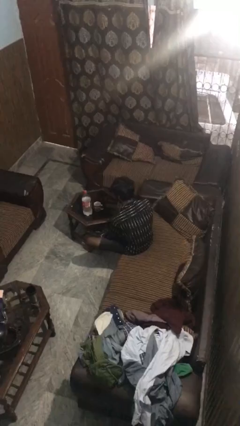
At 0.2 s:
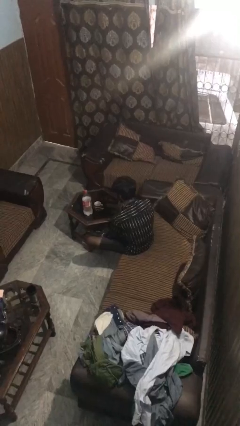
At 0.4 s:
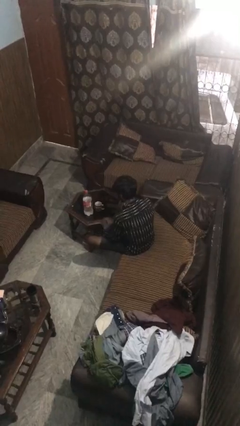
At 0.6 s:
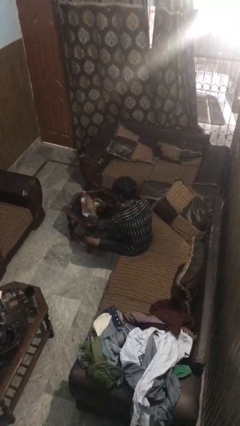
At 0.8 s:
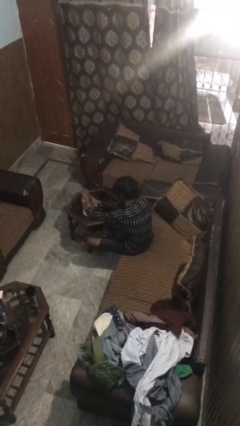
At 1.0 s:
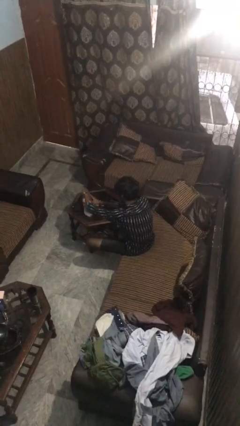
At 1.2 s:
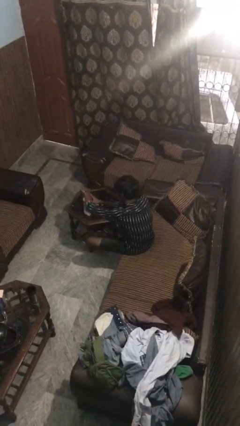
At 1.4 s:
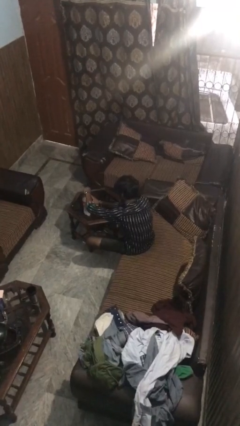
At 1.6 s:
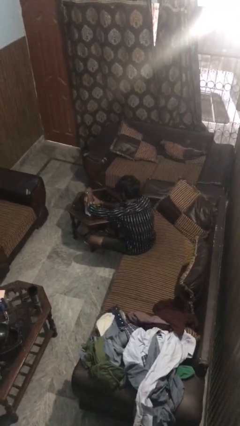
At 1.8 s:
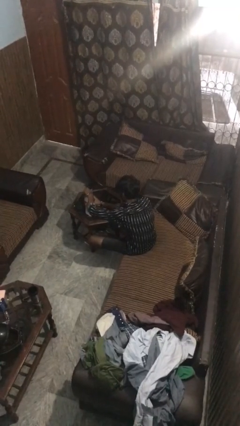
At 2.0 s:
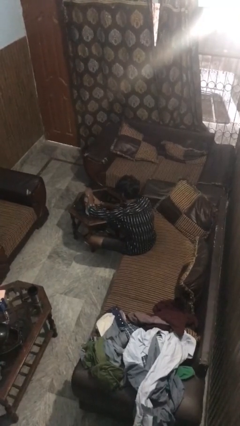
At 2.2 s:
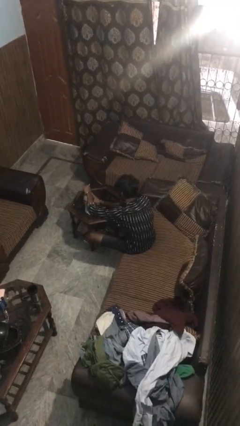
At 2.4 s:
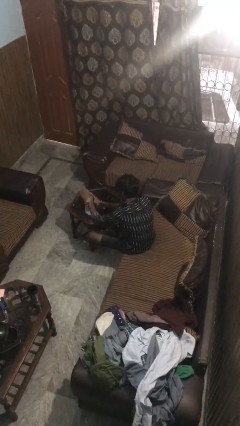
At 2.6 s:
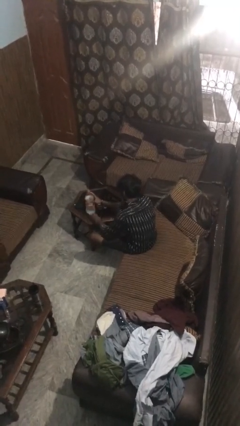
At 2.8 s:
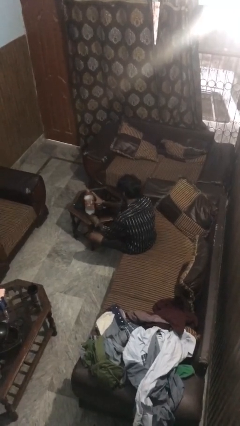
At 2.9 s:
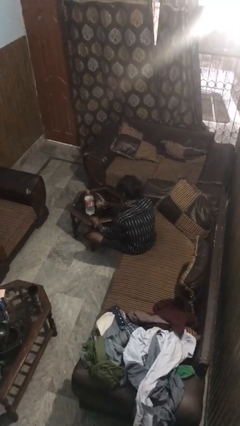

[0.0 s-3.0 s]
person unscrews lid from bottle

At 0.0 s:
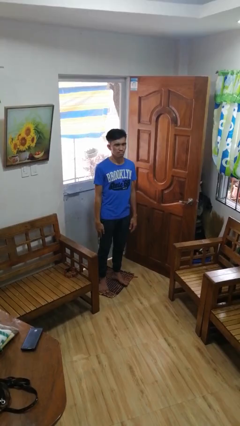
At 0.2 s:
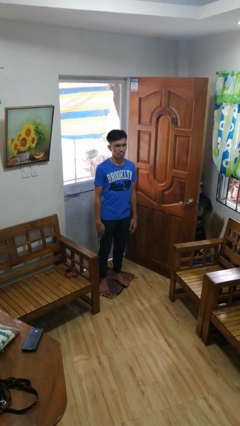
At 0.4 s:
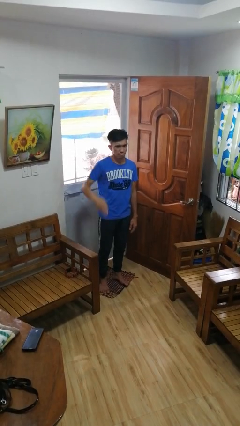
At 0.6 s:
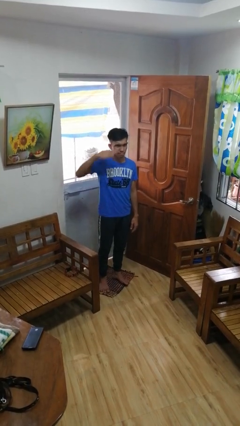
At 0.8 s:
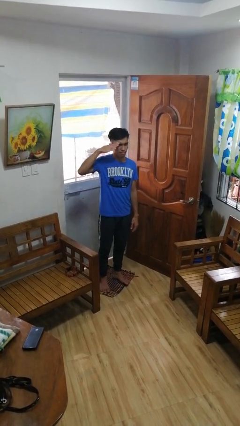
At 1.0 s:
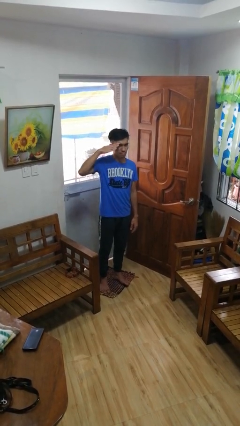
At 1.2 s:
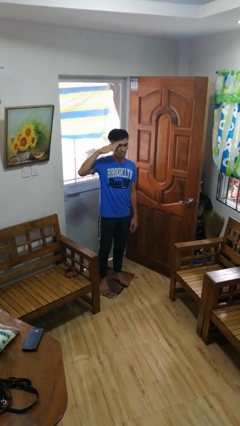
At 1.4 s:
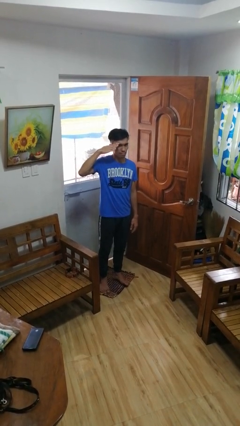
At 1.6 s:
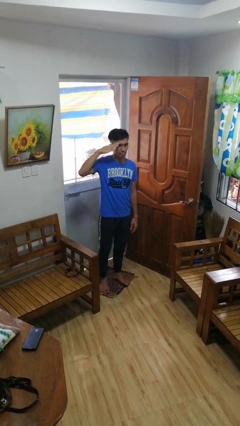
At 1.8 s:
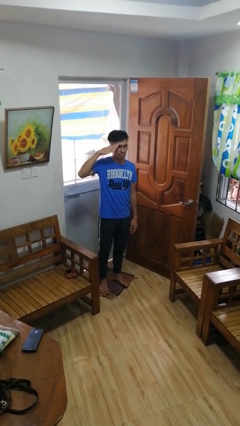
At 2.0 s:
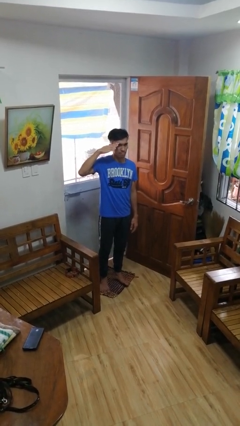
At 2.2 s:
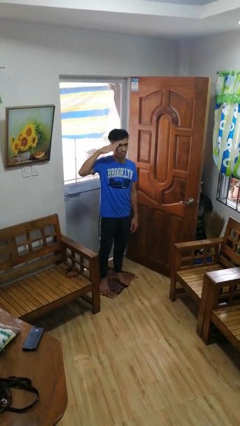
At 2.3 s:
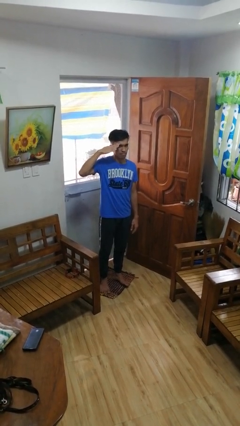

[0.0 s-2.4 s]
person salutes

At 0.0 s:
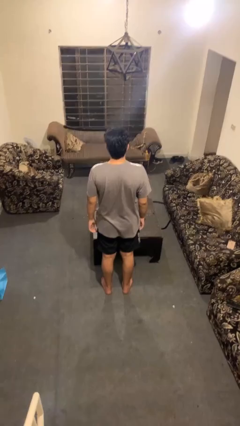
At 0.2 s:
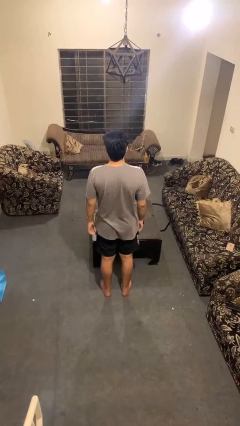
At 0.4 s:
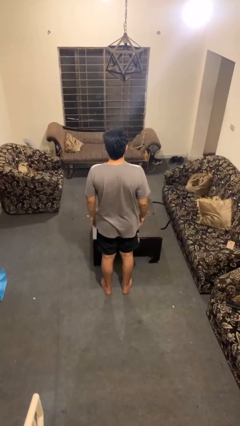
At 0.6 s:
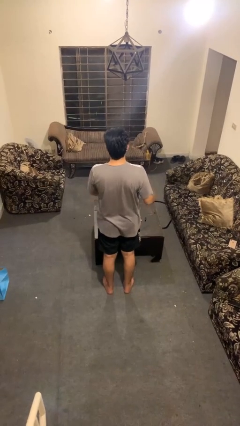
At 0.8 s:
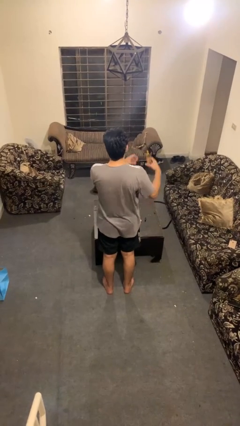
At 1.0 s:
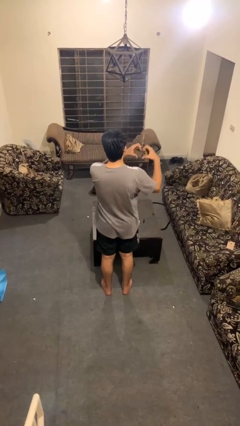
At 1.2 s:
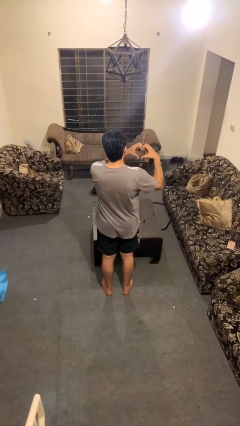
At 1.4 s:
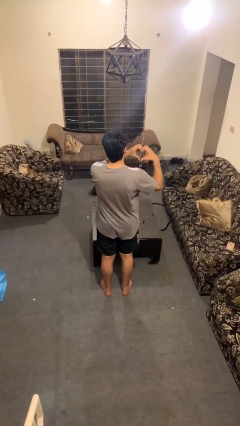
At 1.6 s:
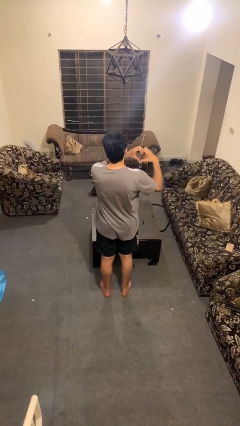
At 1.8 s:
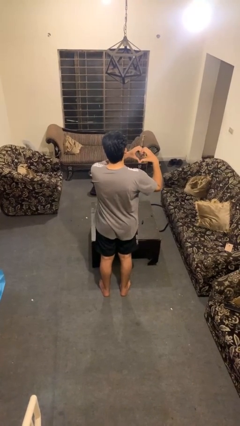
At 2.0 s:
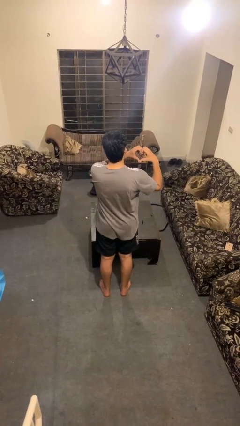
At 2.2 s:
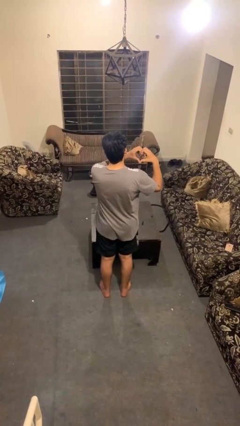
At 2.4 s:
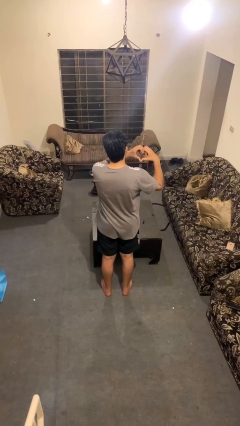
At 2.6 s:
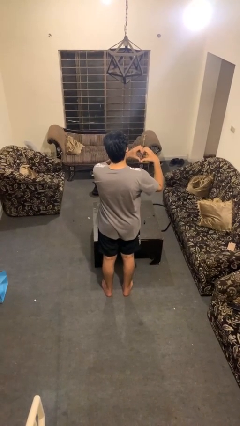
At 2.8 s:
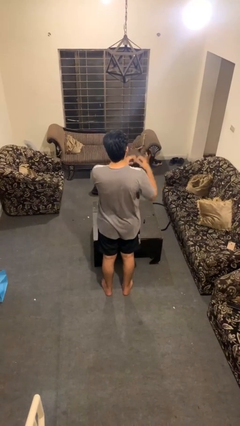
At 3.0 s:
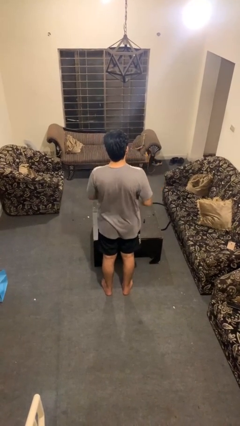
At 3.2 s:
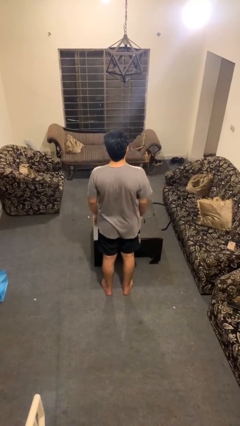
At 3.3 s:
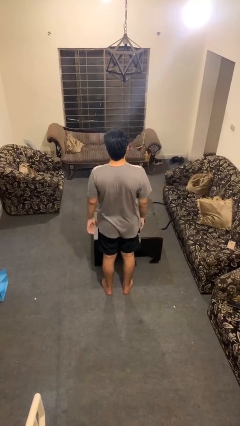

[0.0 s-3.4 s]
person gestures heart

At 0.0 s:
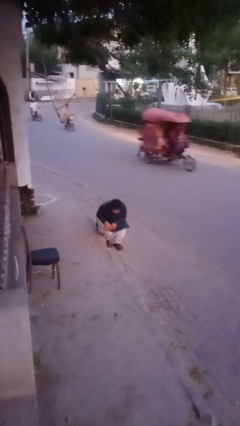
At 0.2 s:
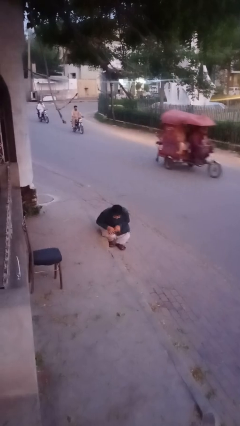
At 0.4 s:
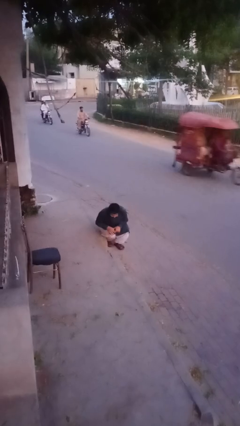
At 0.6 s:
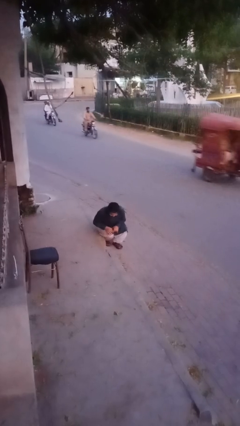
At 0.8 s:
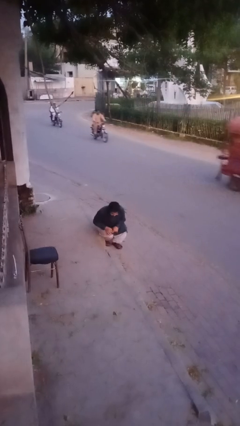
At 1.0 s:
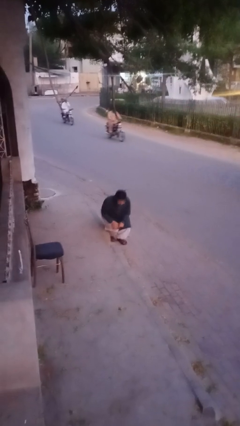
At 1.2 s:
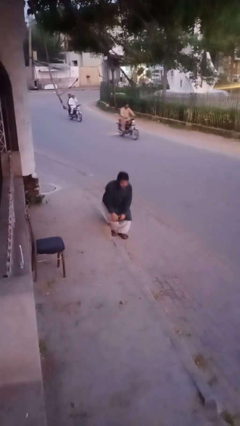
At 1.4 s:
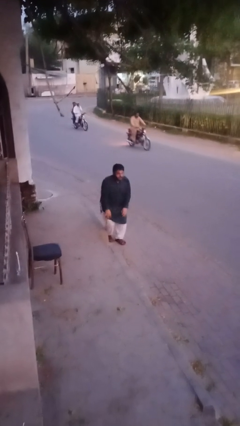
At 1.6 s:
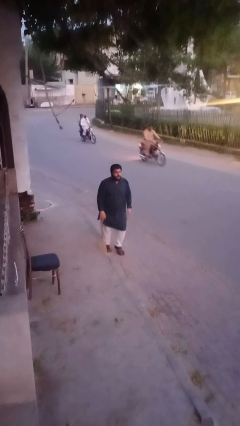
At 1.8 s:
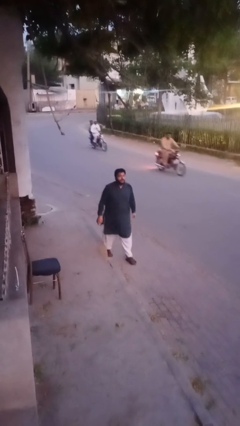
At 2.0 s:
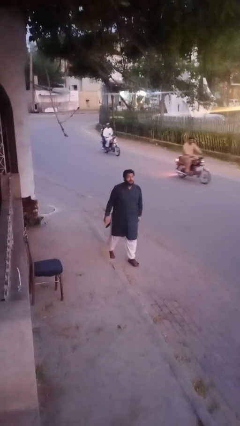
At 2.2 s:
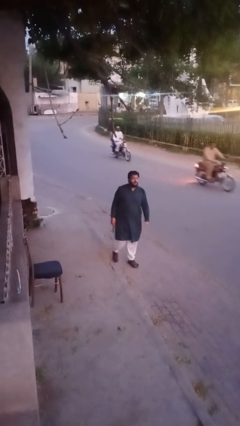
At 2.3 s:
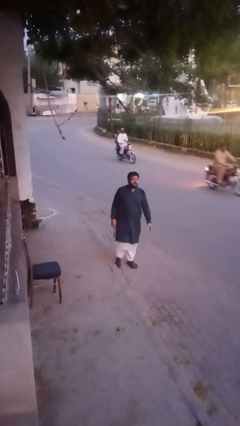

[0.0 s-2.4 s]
person stands up from floor

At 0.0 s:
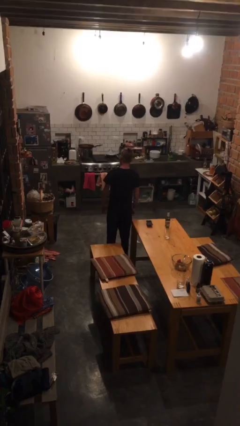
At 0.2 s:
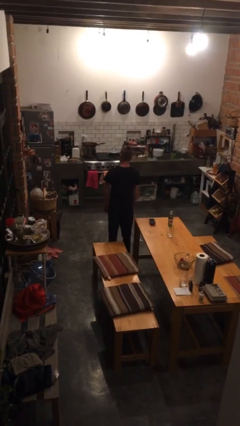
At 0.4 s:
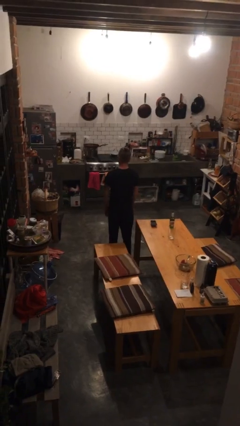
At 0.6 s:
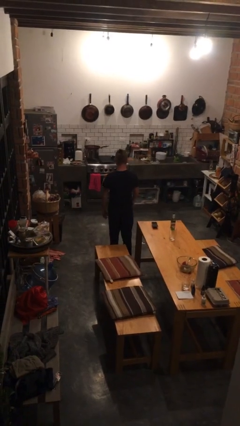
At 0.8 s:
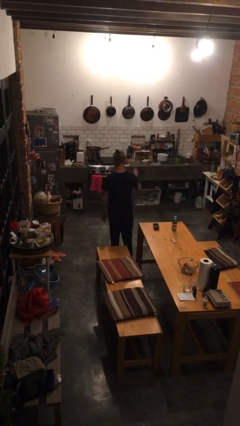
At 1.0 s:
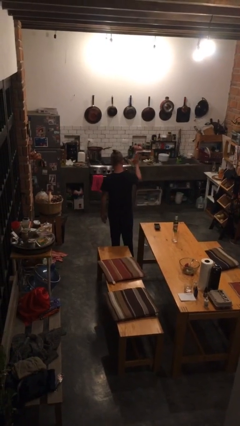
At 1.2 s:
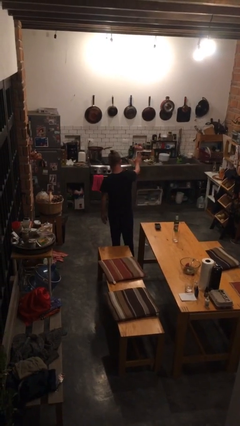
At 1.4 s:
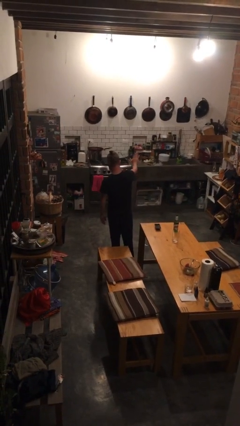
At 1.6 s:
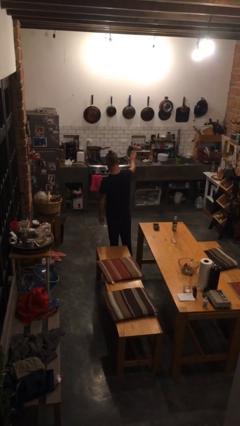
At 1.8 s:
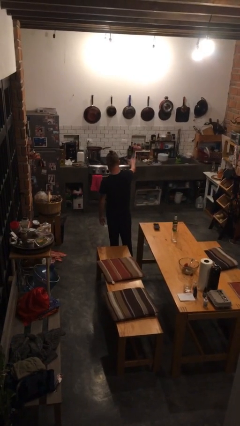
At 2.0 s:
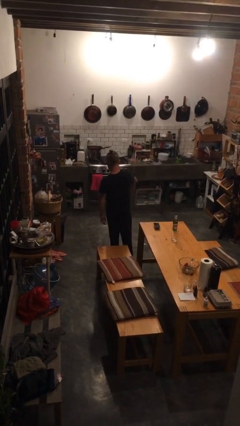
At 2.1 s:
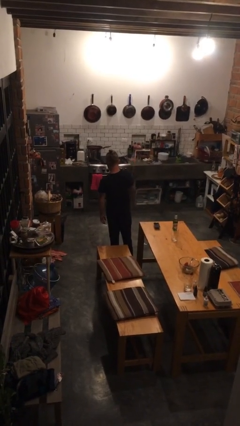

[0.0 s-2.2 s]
person gestures stop

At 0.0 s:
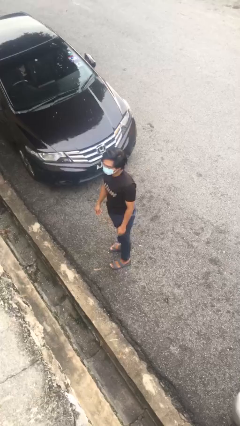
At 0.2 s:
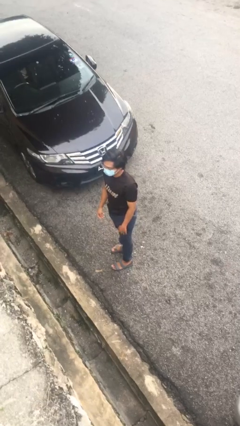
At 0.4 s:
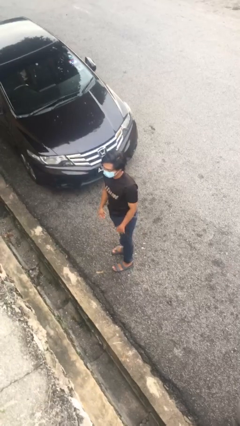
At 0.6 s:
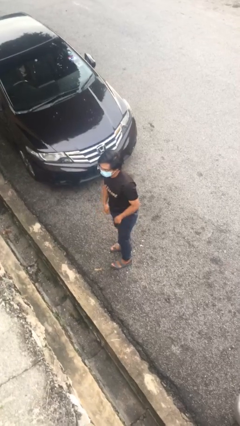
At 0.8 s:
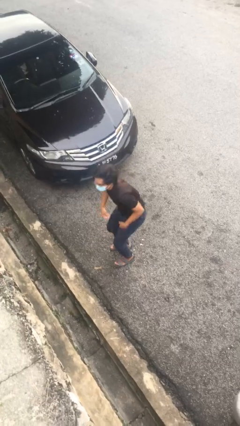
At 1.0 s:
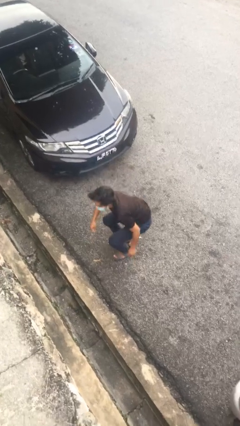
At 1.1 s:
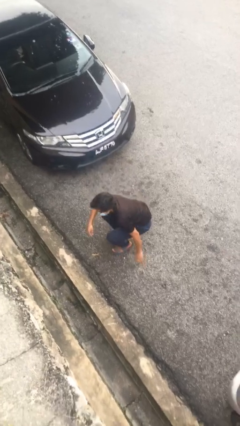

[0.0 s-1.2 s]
person sits down

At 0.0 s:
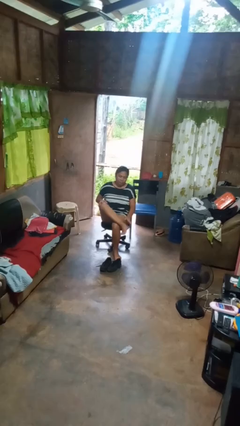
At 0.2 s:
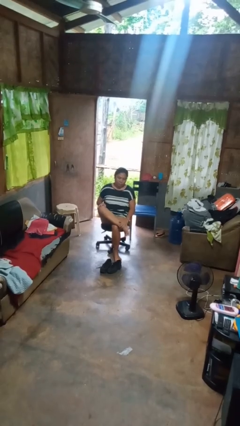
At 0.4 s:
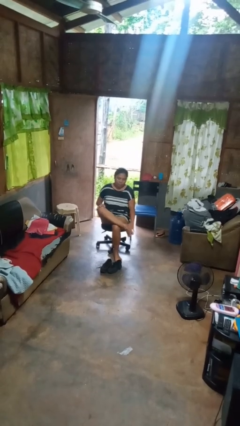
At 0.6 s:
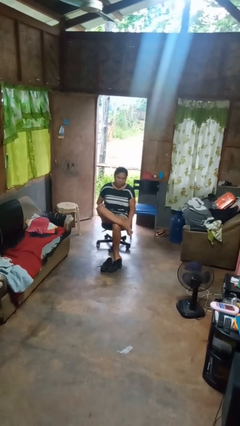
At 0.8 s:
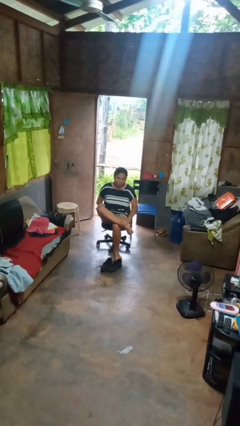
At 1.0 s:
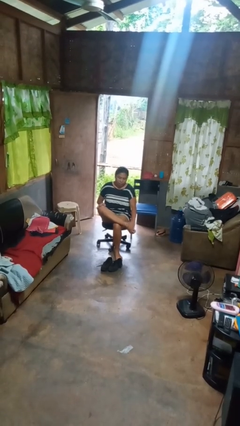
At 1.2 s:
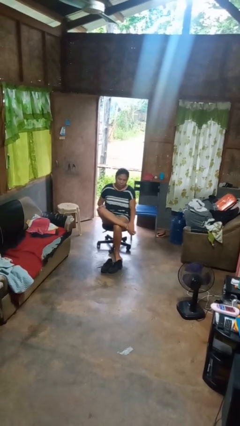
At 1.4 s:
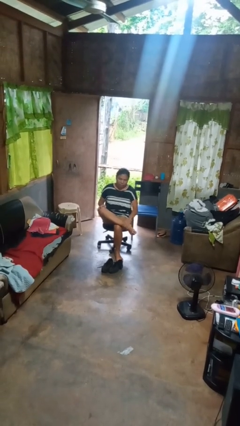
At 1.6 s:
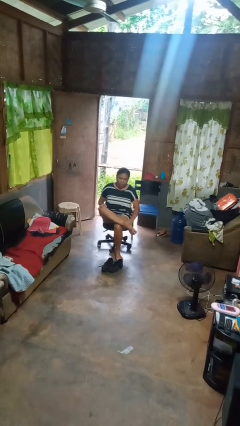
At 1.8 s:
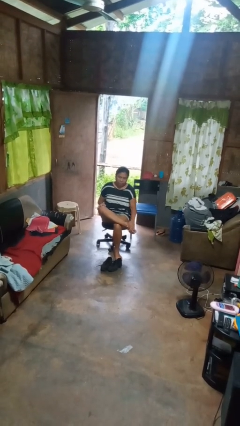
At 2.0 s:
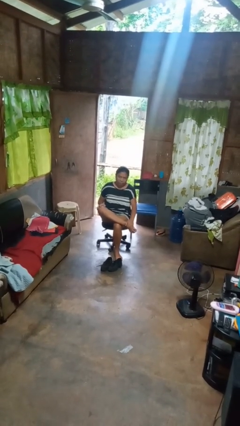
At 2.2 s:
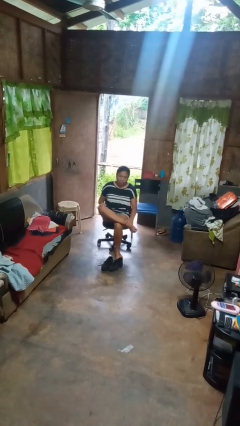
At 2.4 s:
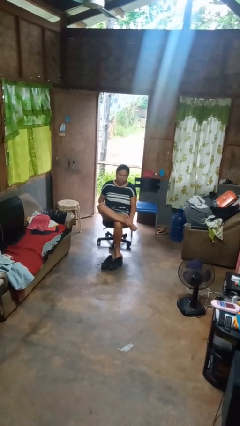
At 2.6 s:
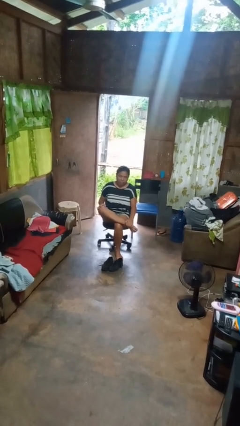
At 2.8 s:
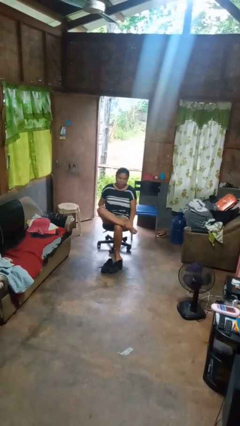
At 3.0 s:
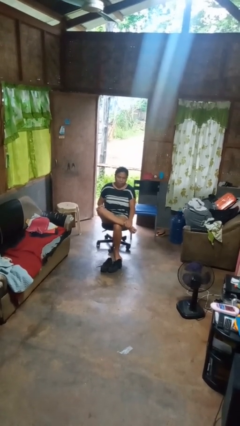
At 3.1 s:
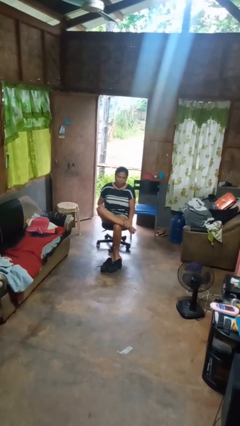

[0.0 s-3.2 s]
person rubs foot
